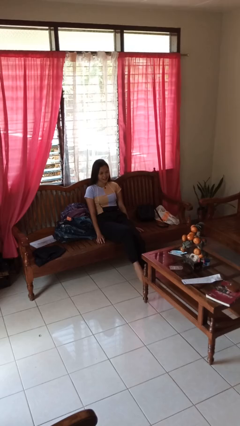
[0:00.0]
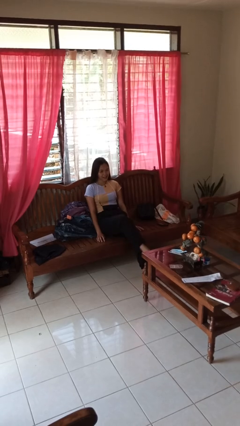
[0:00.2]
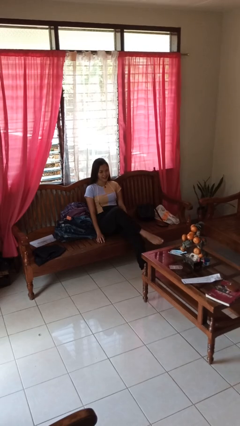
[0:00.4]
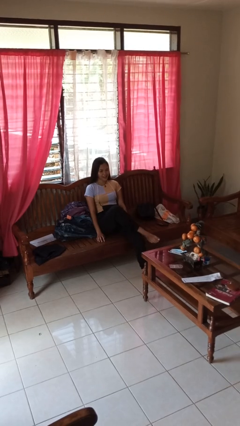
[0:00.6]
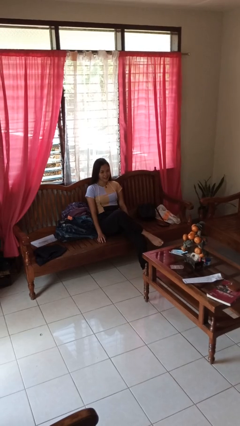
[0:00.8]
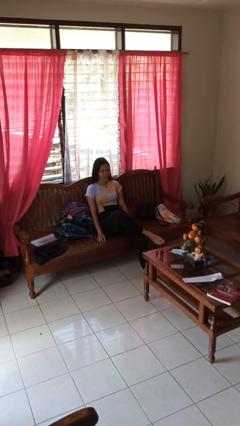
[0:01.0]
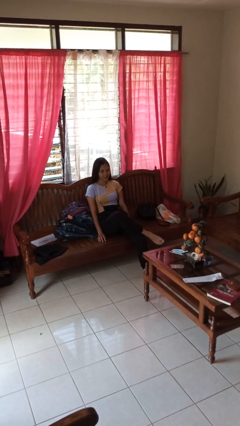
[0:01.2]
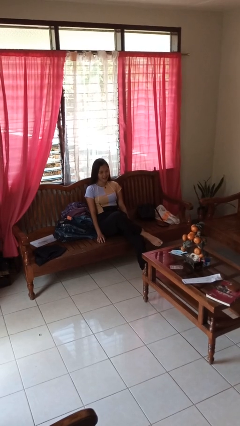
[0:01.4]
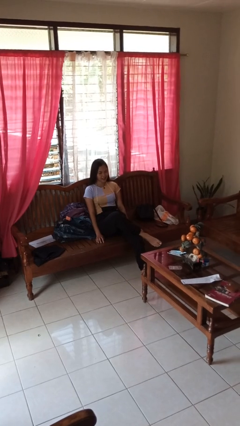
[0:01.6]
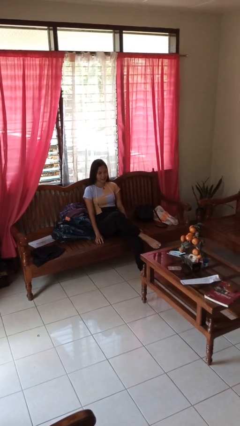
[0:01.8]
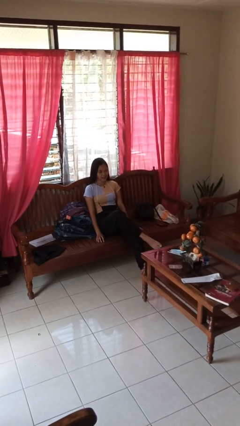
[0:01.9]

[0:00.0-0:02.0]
person crosses legs

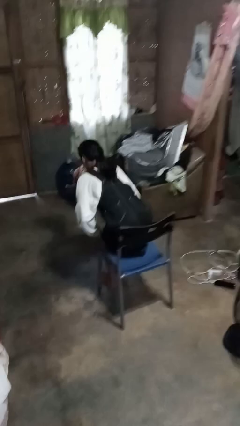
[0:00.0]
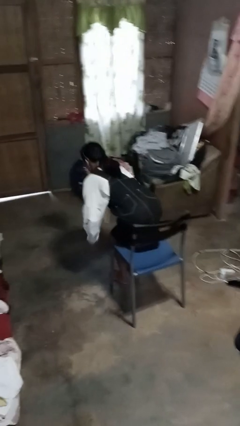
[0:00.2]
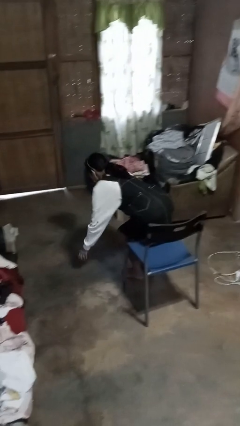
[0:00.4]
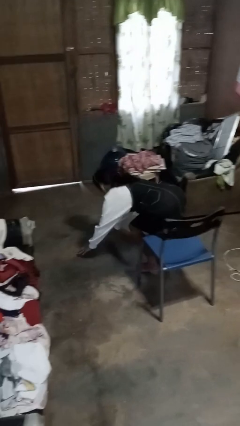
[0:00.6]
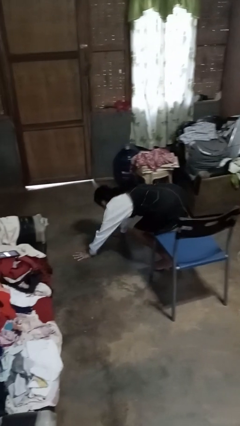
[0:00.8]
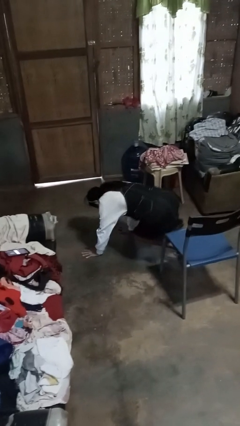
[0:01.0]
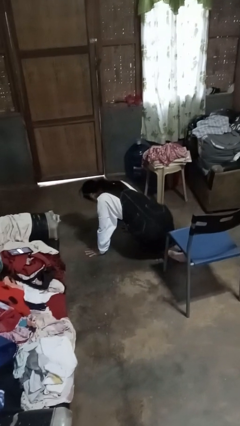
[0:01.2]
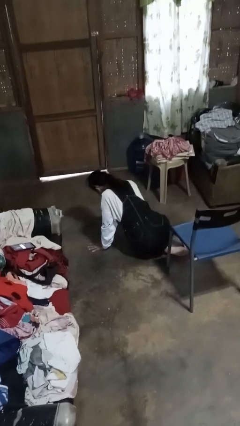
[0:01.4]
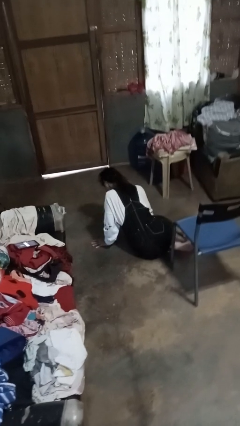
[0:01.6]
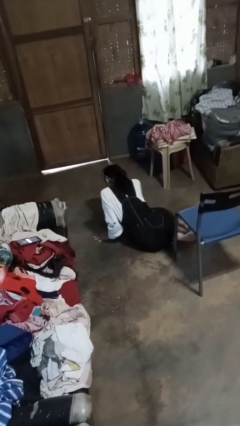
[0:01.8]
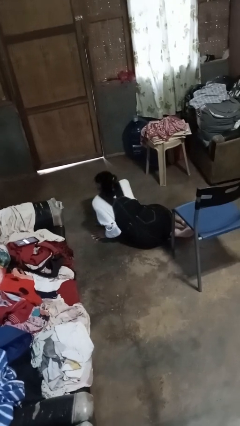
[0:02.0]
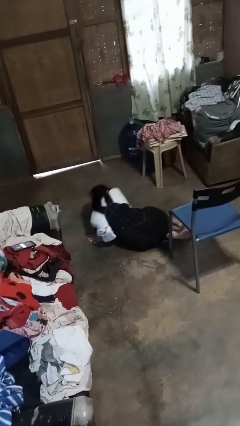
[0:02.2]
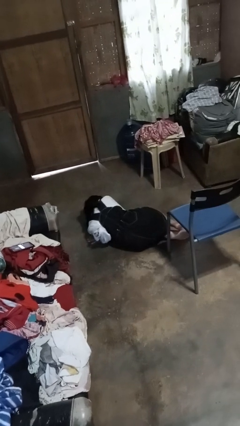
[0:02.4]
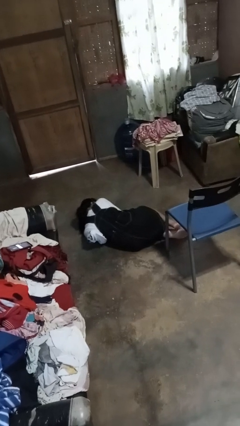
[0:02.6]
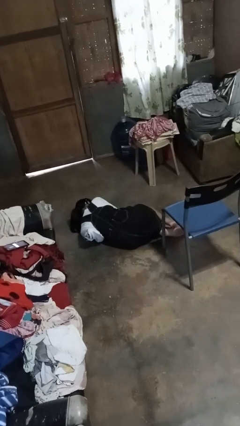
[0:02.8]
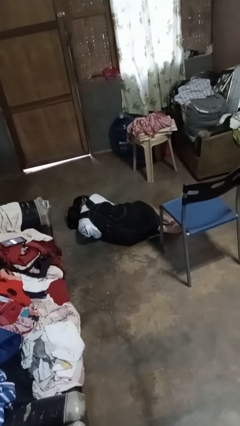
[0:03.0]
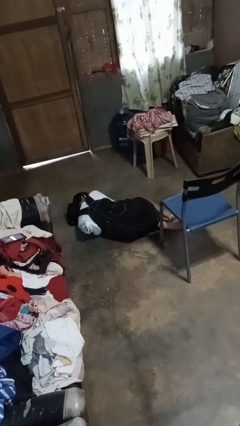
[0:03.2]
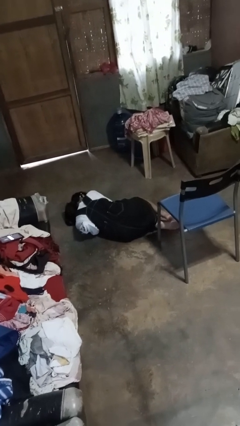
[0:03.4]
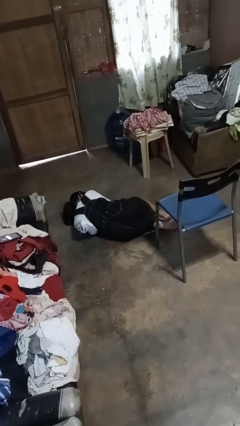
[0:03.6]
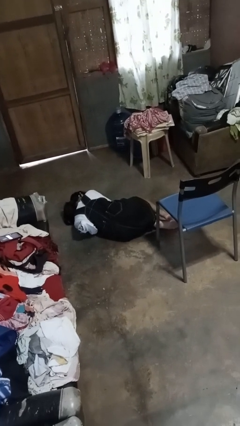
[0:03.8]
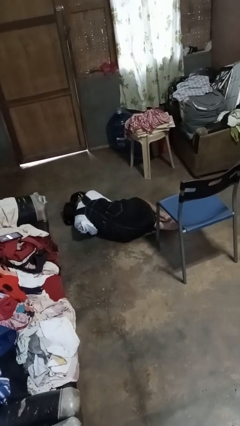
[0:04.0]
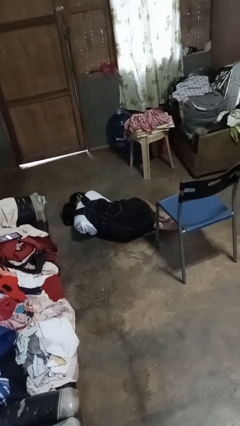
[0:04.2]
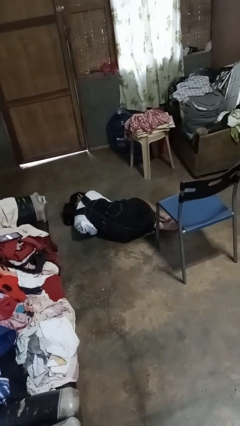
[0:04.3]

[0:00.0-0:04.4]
person falls from chair

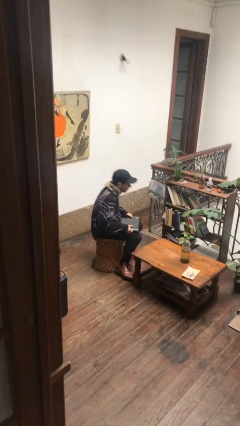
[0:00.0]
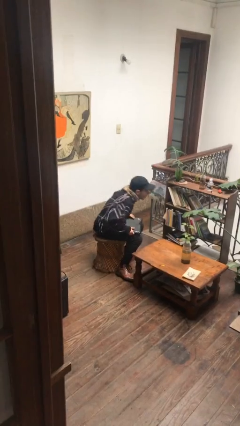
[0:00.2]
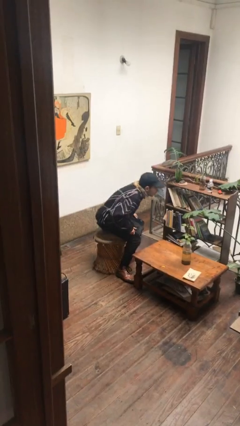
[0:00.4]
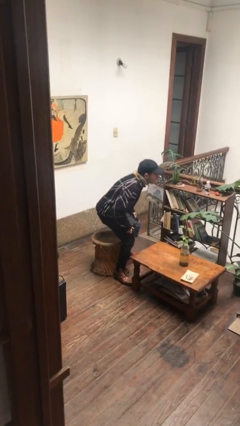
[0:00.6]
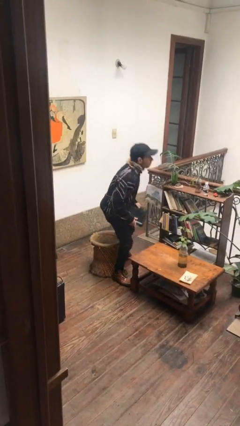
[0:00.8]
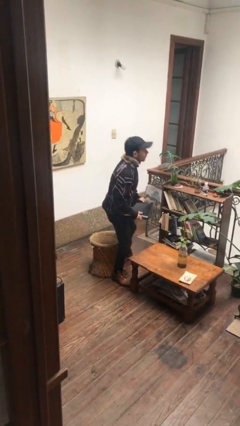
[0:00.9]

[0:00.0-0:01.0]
person stands up

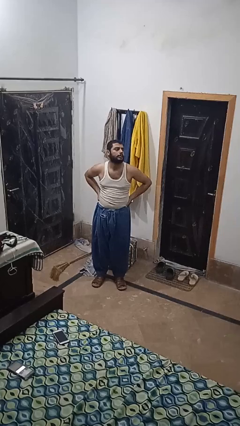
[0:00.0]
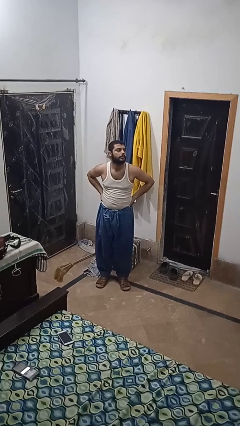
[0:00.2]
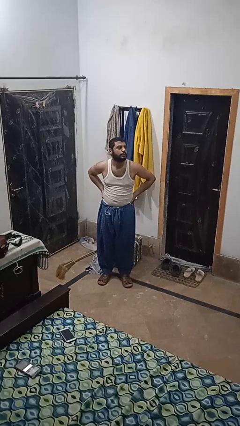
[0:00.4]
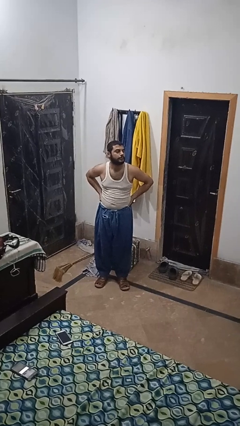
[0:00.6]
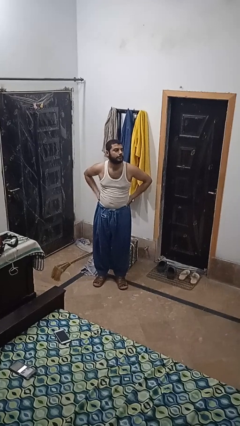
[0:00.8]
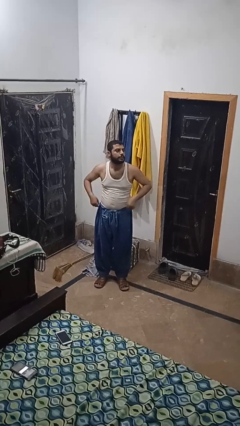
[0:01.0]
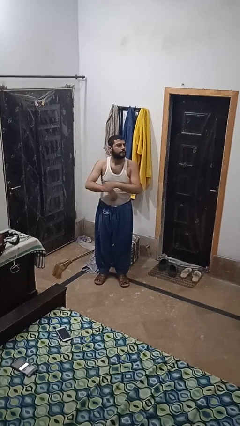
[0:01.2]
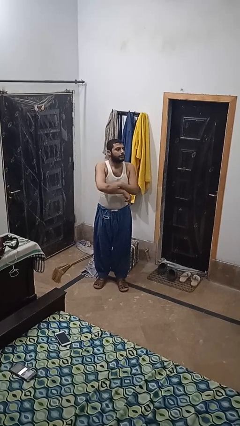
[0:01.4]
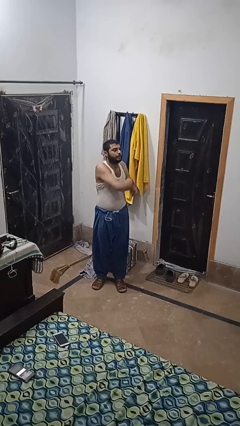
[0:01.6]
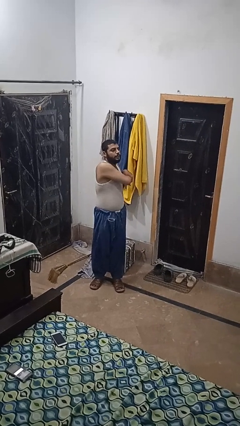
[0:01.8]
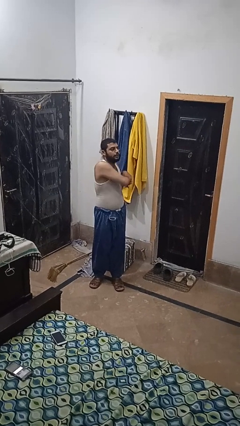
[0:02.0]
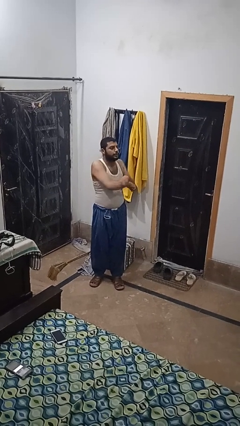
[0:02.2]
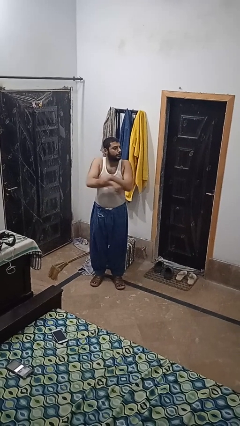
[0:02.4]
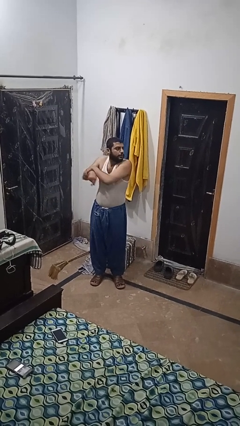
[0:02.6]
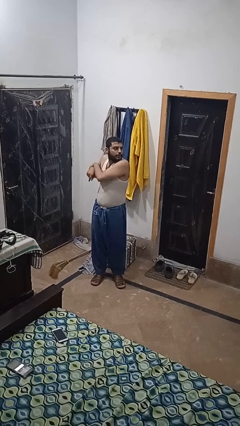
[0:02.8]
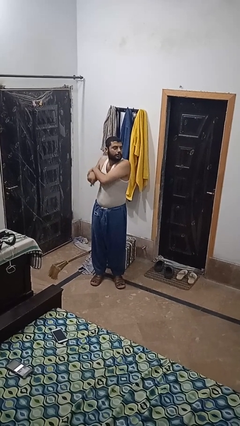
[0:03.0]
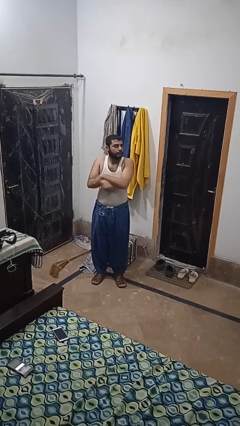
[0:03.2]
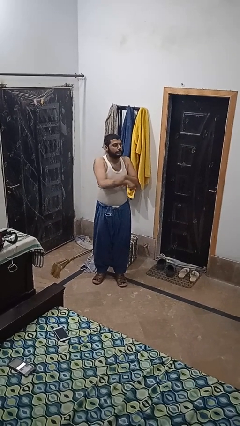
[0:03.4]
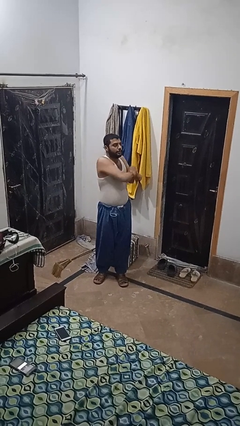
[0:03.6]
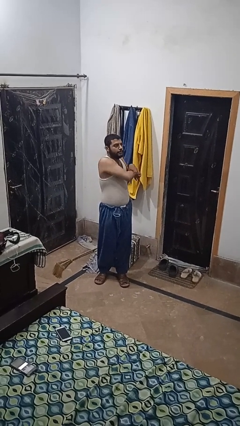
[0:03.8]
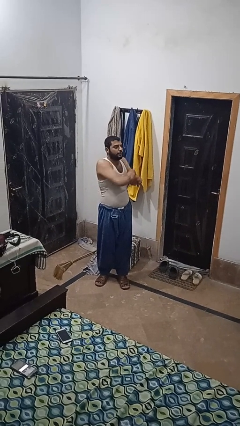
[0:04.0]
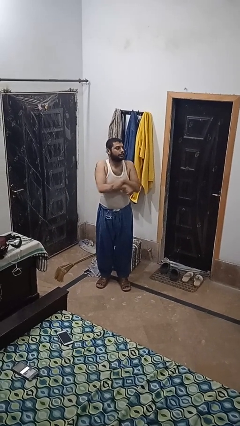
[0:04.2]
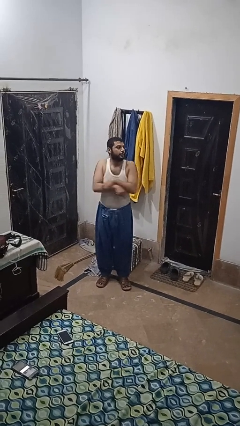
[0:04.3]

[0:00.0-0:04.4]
person stretches arms to side

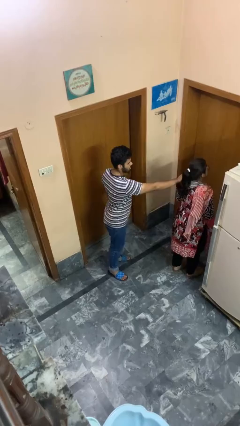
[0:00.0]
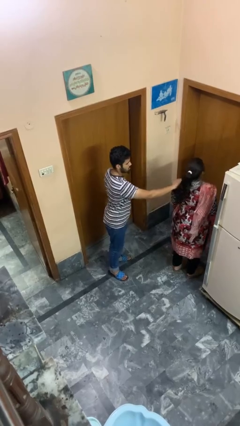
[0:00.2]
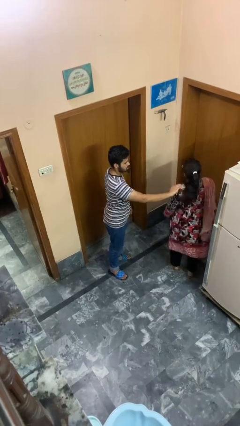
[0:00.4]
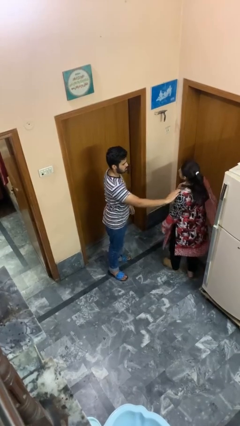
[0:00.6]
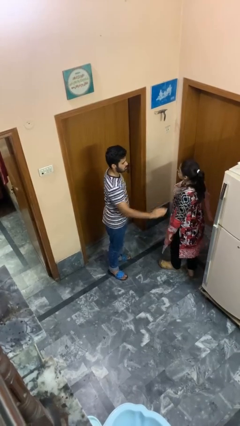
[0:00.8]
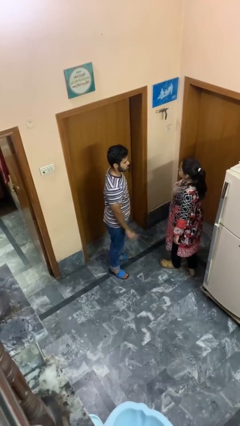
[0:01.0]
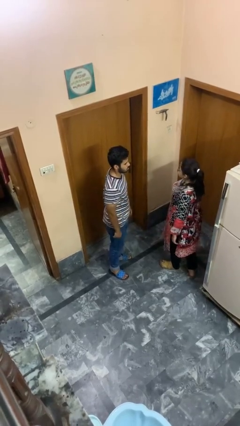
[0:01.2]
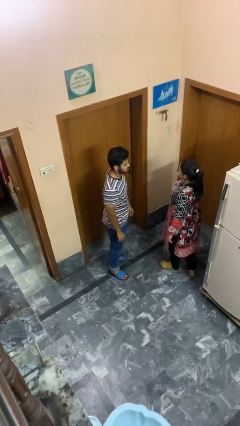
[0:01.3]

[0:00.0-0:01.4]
person spins person around

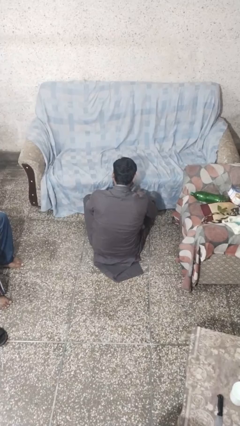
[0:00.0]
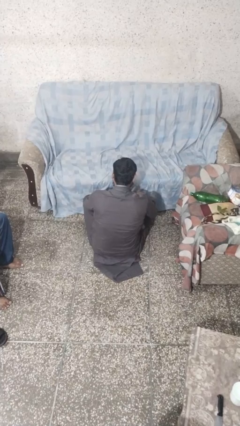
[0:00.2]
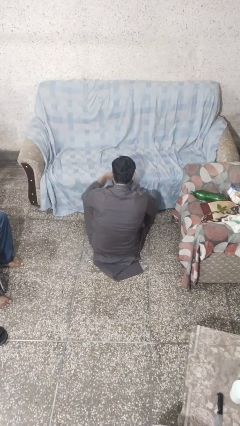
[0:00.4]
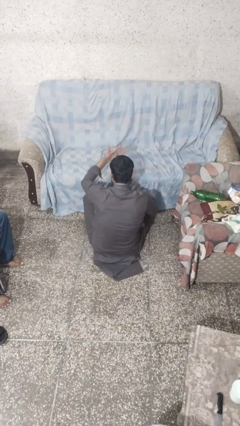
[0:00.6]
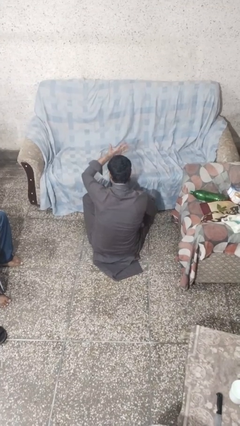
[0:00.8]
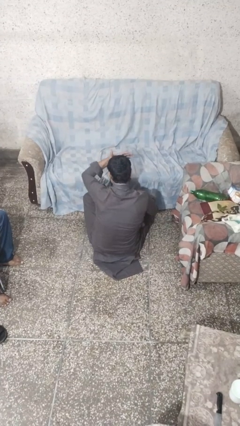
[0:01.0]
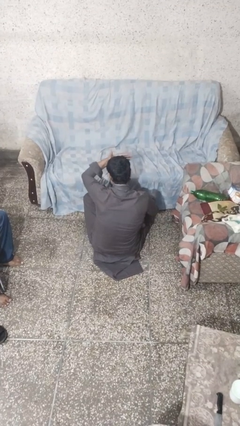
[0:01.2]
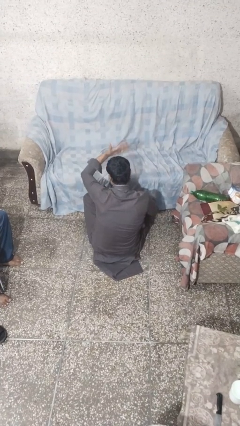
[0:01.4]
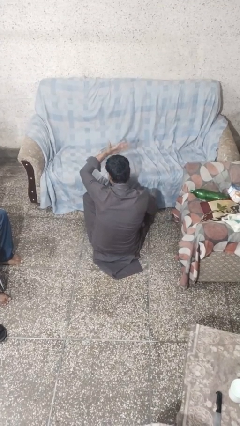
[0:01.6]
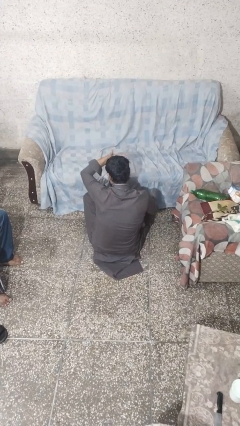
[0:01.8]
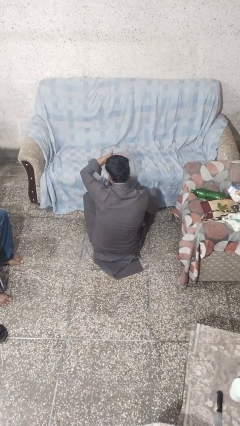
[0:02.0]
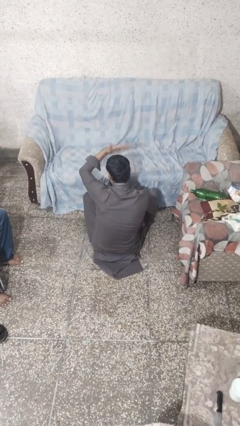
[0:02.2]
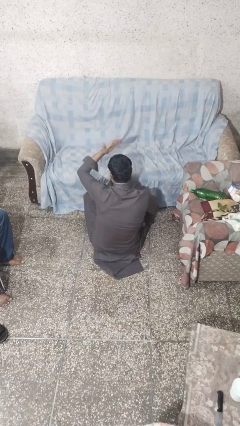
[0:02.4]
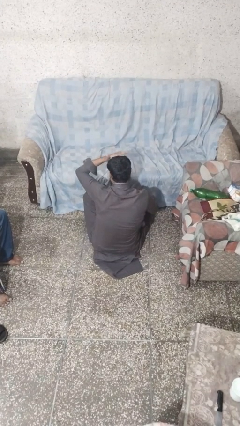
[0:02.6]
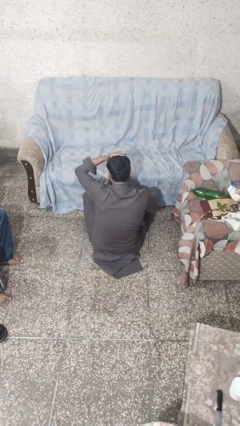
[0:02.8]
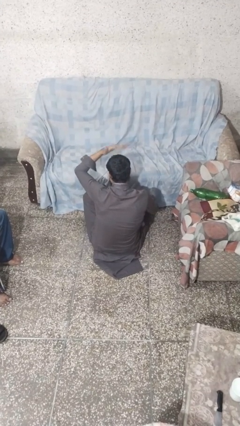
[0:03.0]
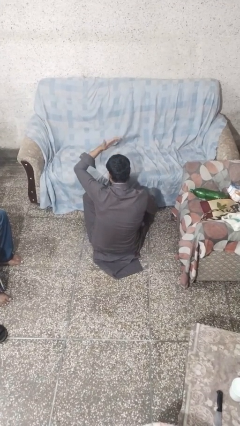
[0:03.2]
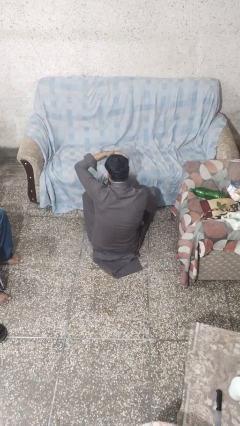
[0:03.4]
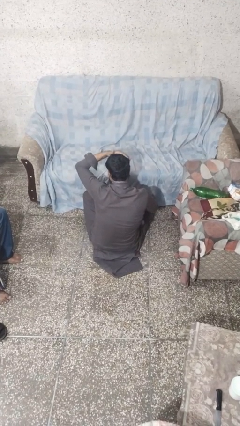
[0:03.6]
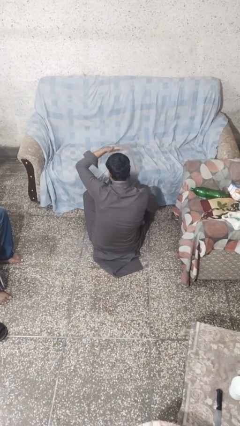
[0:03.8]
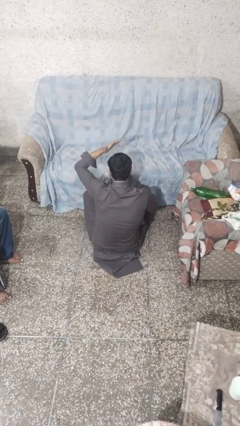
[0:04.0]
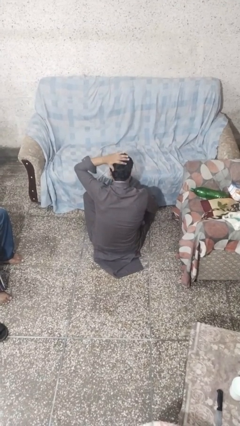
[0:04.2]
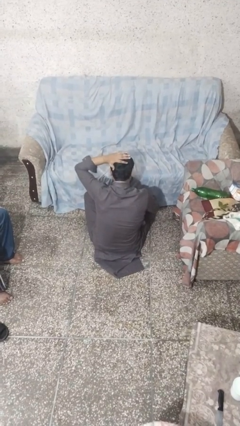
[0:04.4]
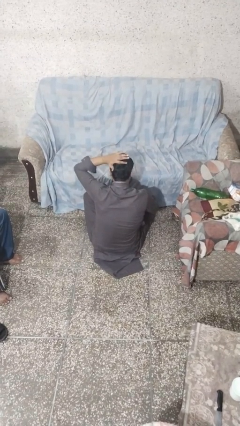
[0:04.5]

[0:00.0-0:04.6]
person pats head
